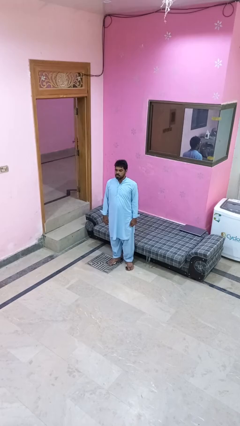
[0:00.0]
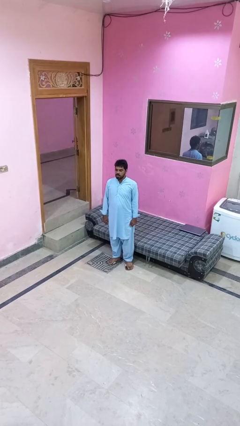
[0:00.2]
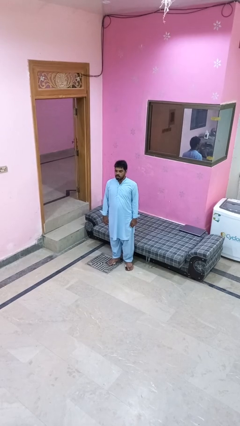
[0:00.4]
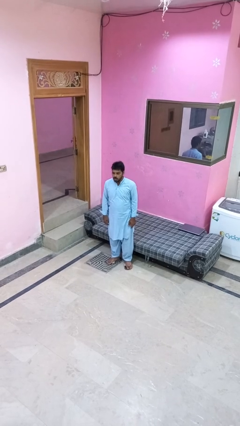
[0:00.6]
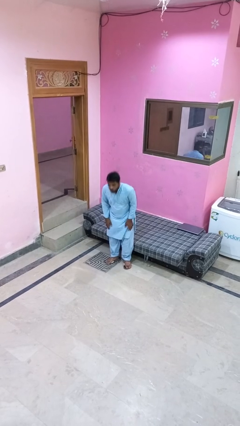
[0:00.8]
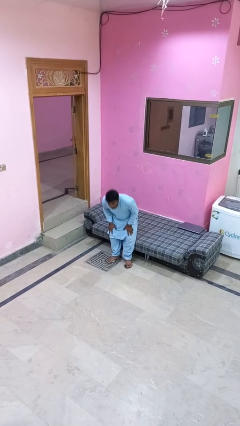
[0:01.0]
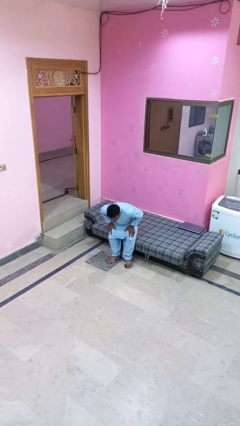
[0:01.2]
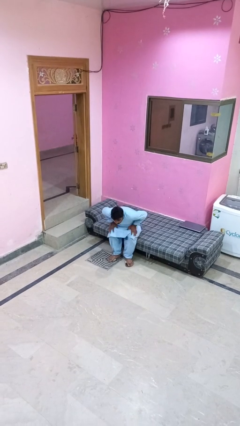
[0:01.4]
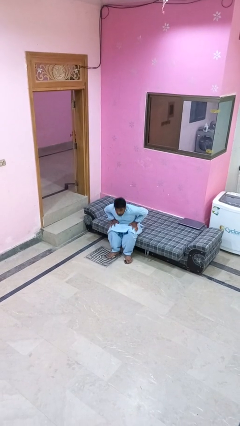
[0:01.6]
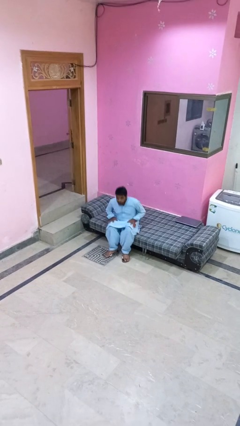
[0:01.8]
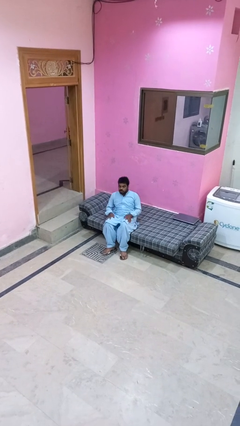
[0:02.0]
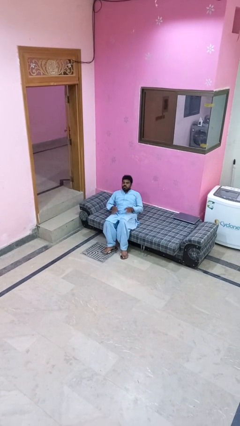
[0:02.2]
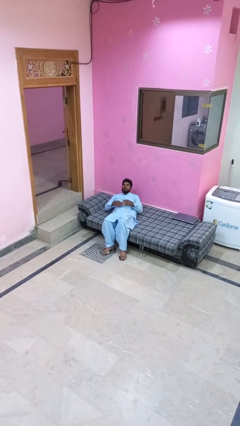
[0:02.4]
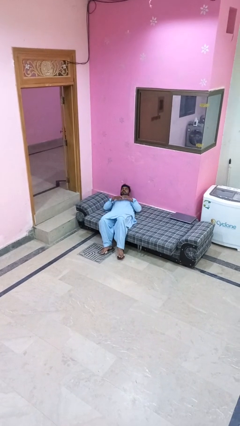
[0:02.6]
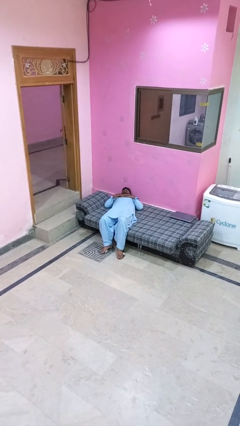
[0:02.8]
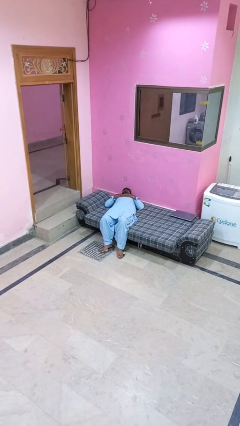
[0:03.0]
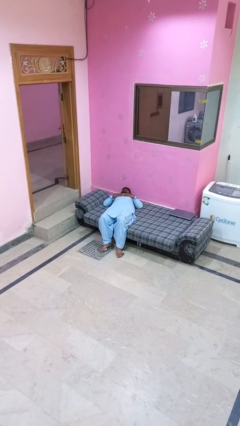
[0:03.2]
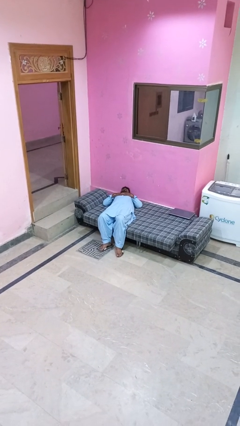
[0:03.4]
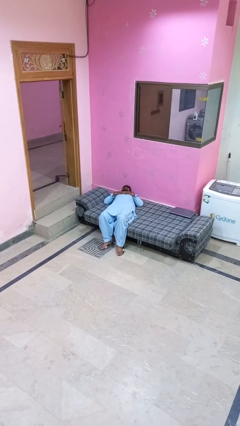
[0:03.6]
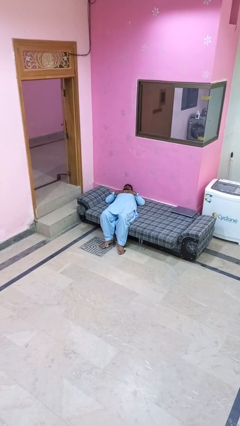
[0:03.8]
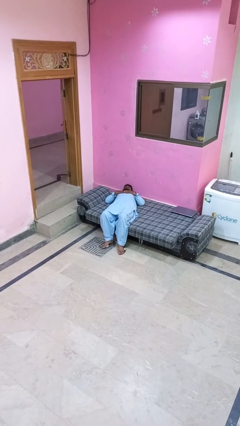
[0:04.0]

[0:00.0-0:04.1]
person lies down on bed

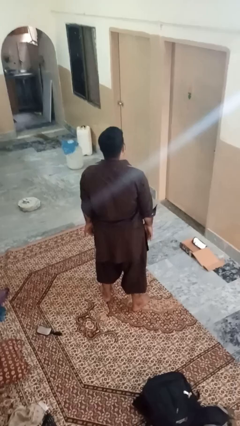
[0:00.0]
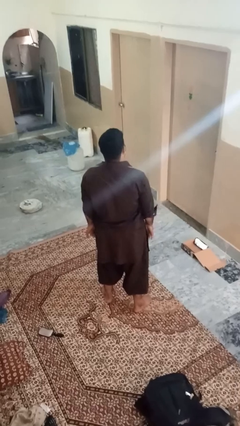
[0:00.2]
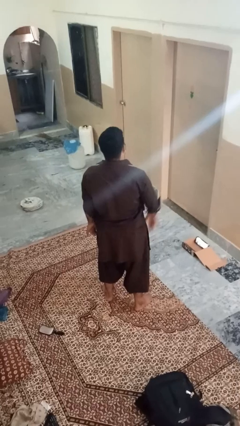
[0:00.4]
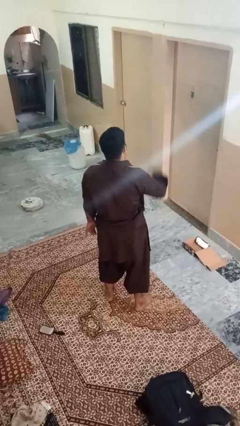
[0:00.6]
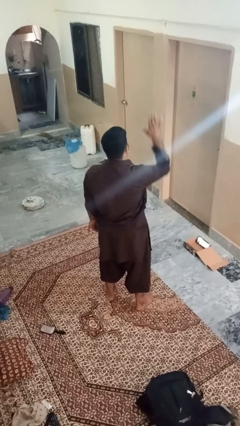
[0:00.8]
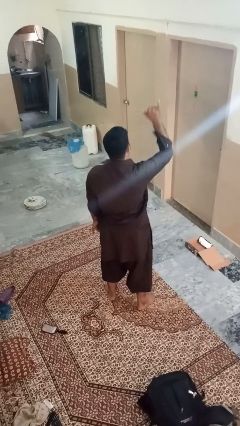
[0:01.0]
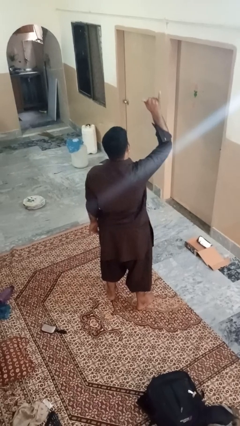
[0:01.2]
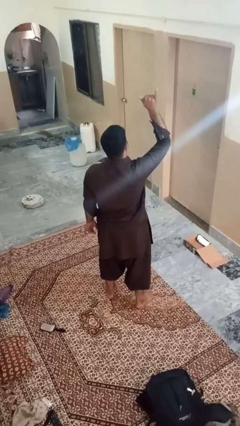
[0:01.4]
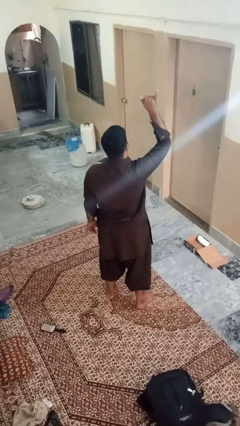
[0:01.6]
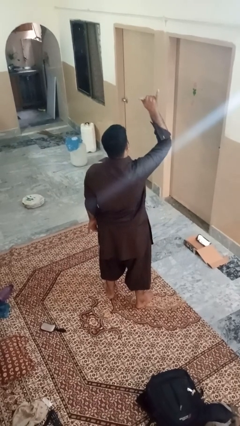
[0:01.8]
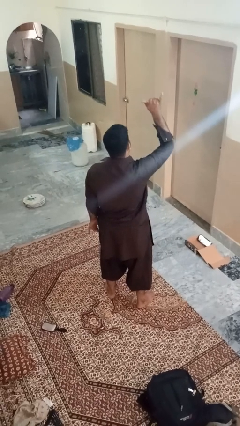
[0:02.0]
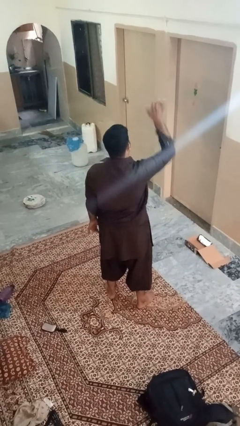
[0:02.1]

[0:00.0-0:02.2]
person gestures hang loose

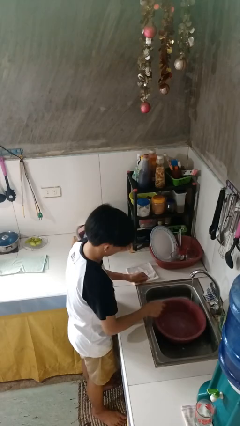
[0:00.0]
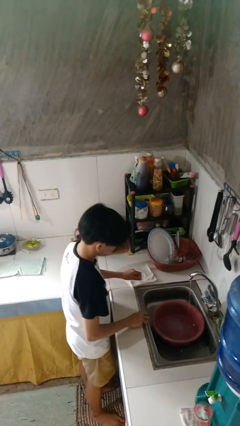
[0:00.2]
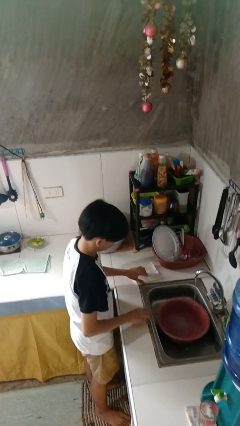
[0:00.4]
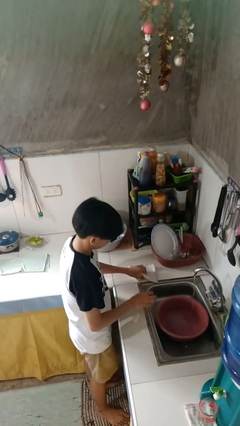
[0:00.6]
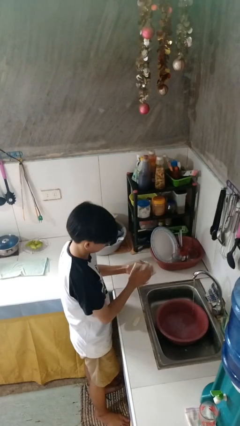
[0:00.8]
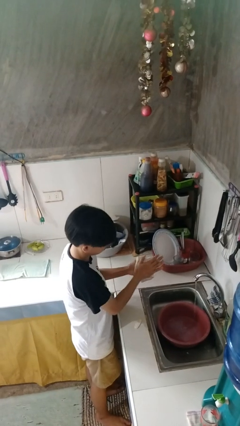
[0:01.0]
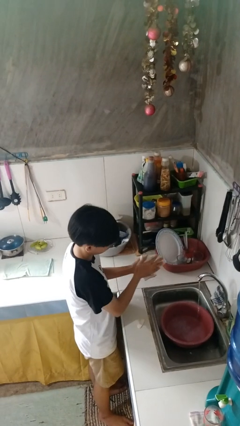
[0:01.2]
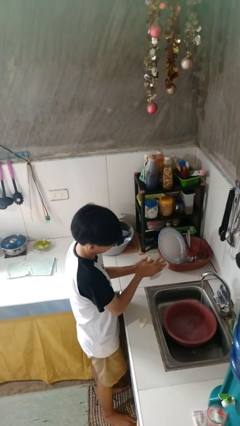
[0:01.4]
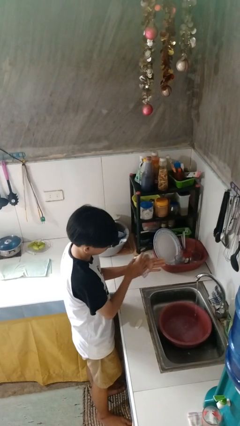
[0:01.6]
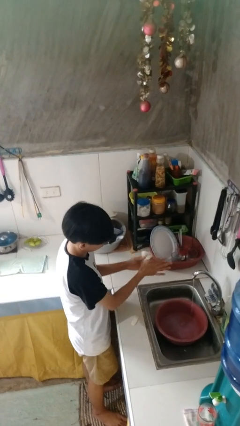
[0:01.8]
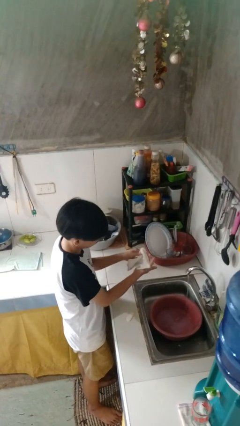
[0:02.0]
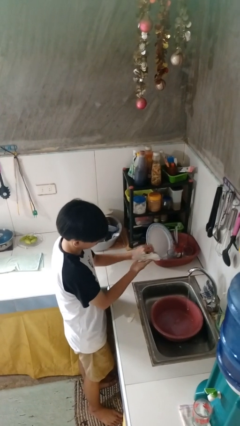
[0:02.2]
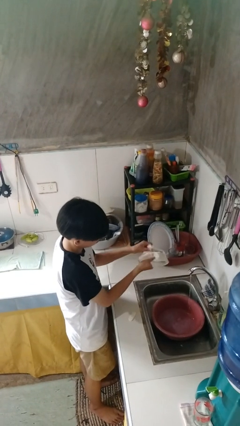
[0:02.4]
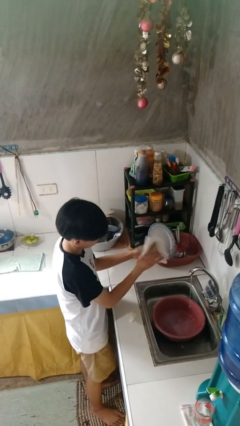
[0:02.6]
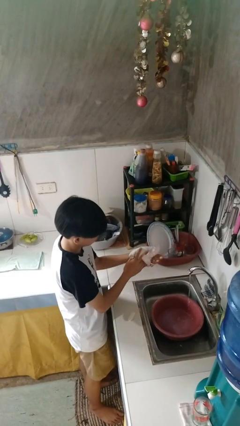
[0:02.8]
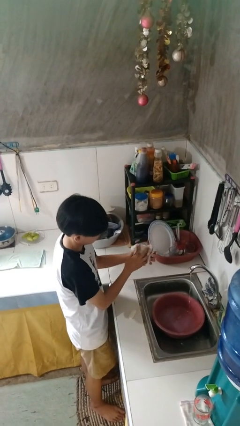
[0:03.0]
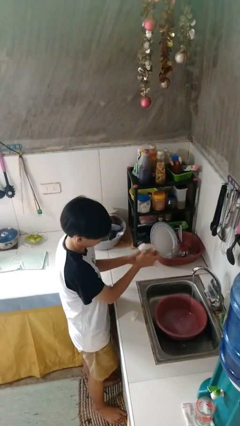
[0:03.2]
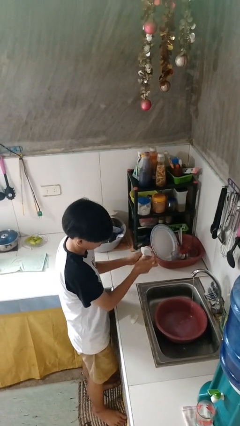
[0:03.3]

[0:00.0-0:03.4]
person dries hands with towel

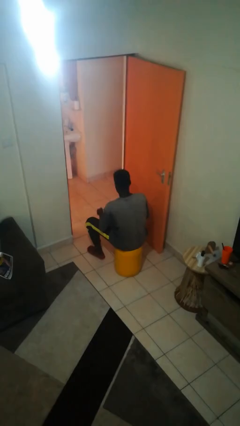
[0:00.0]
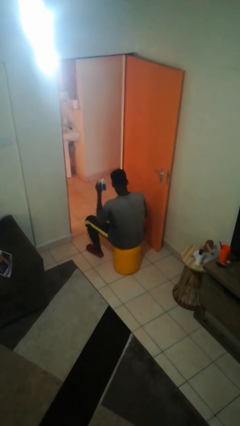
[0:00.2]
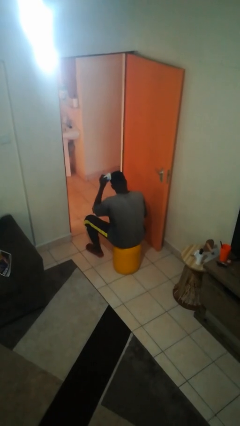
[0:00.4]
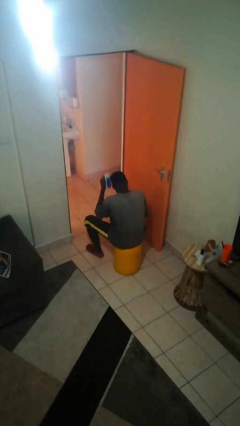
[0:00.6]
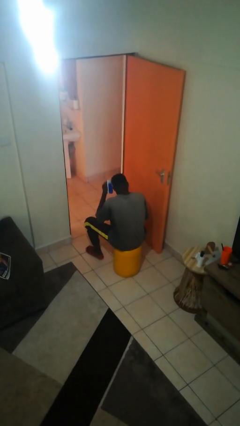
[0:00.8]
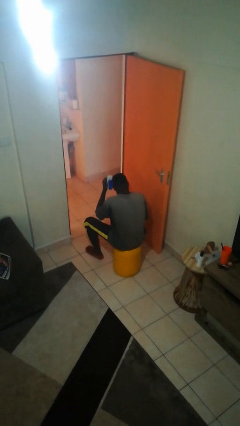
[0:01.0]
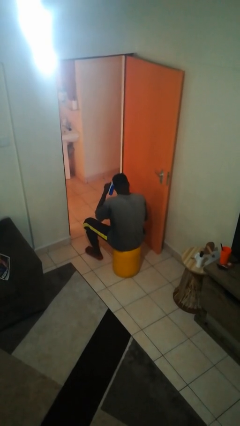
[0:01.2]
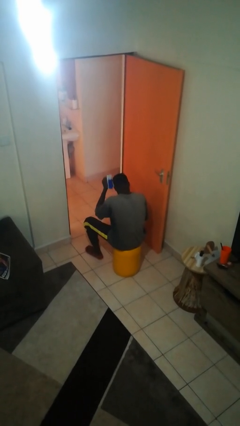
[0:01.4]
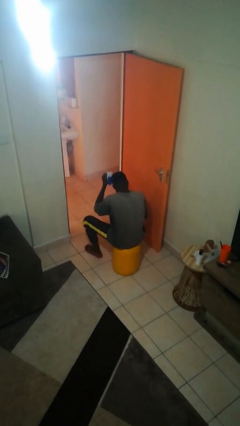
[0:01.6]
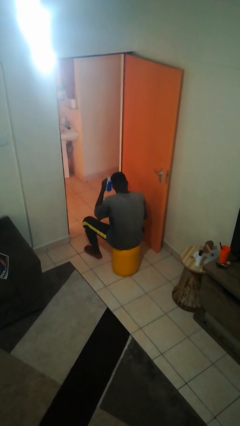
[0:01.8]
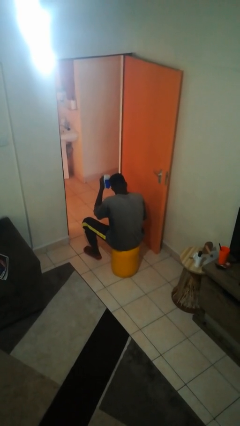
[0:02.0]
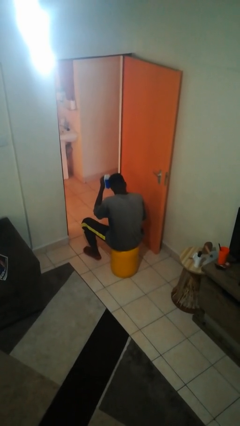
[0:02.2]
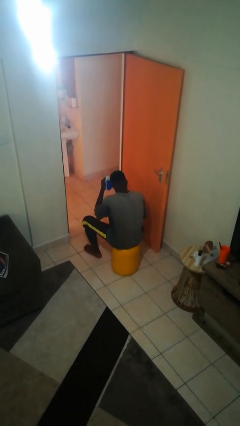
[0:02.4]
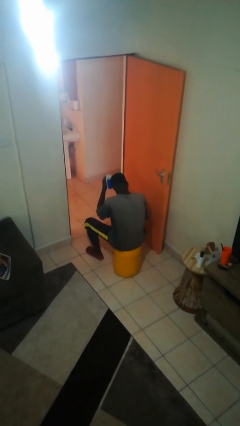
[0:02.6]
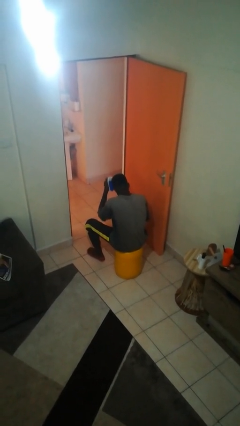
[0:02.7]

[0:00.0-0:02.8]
person brushes hair

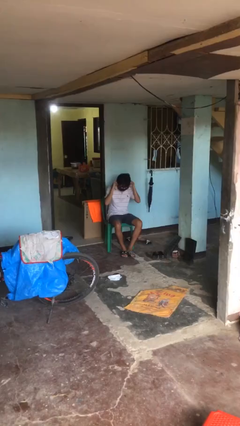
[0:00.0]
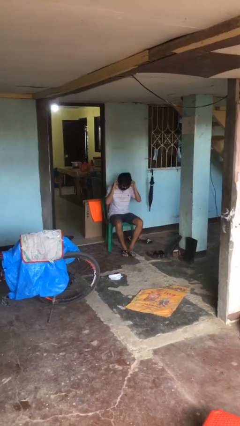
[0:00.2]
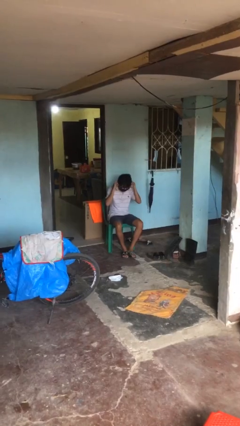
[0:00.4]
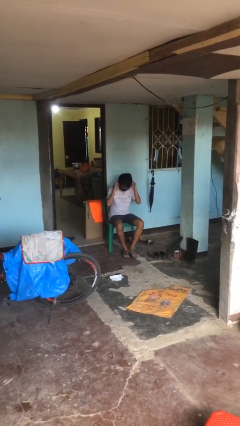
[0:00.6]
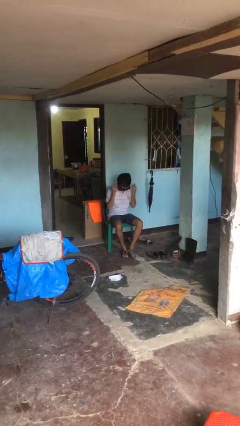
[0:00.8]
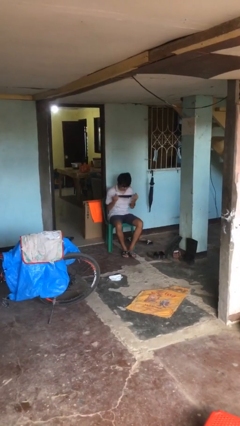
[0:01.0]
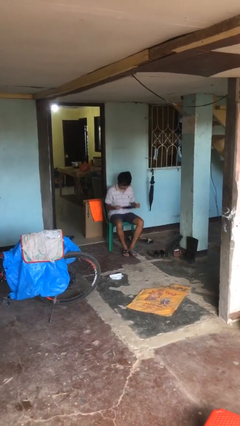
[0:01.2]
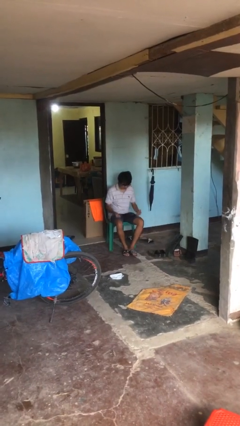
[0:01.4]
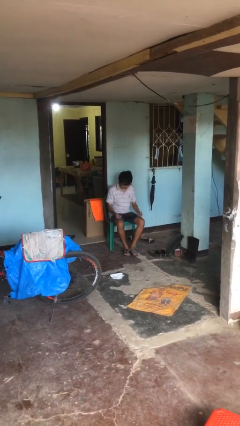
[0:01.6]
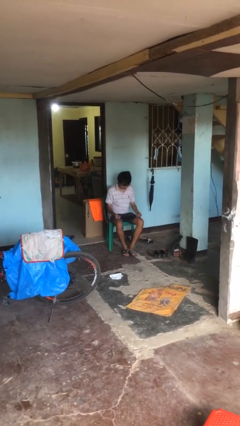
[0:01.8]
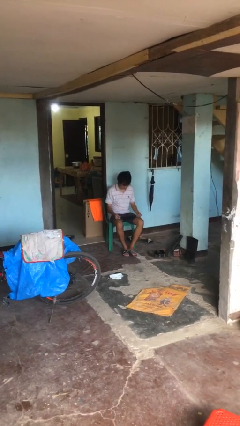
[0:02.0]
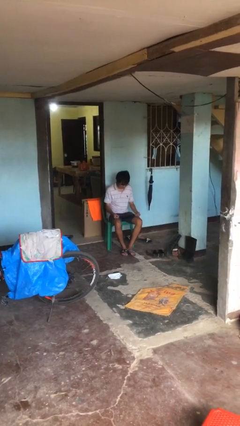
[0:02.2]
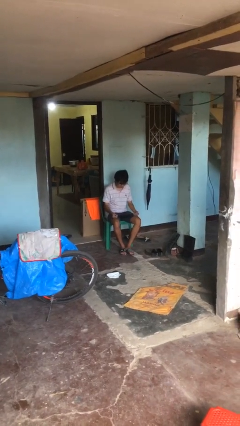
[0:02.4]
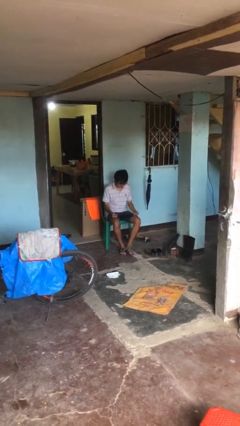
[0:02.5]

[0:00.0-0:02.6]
person takes off facemask

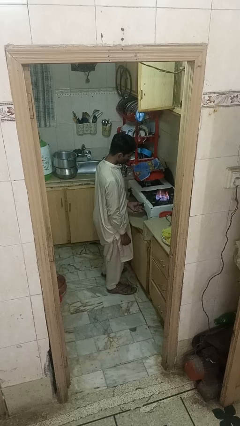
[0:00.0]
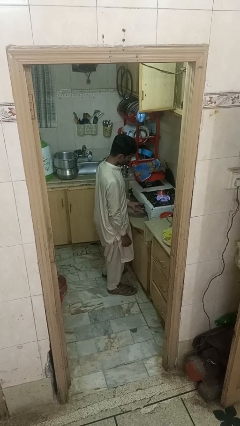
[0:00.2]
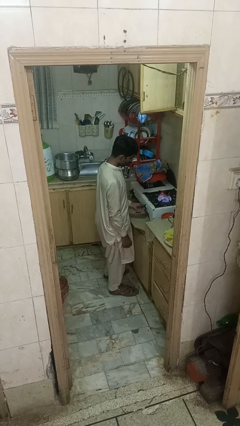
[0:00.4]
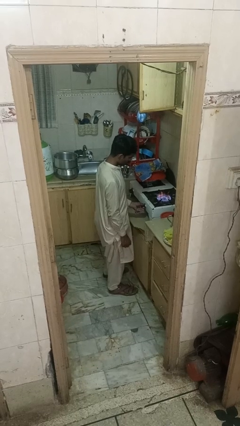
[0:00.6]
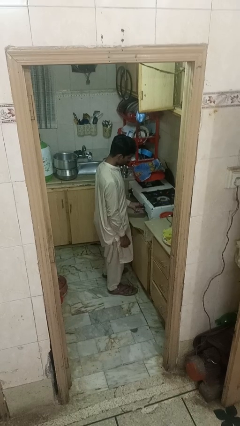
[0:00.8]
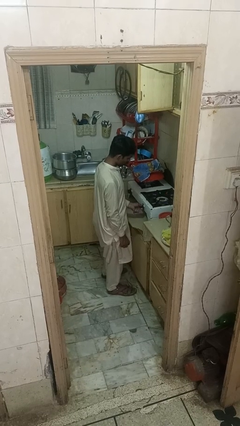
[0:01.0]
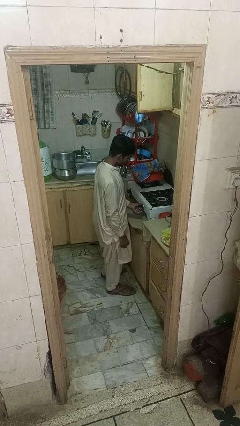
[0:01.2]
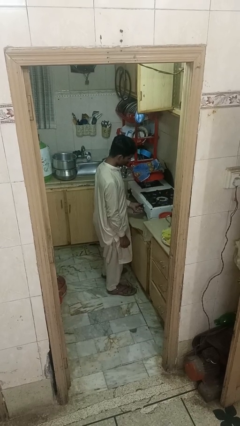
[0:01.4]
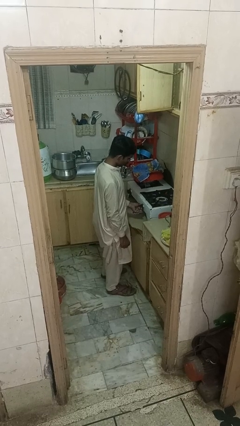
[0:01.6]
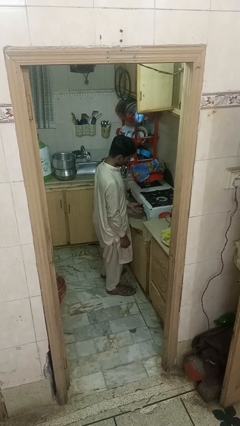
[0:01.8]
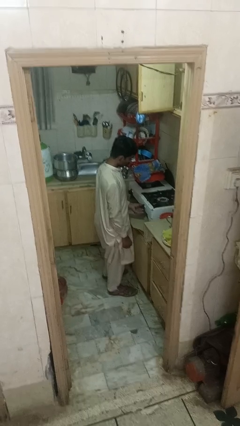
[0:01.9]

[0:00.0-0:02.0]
person turns off stovetop

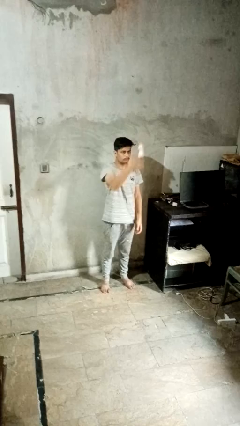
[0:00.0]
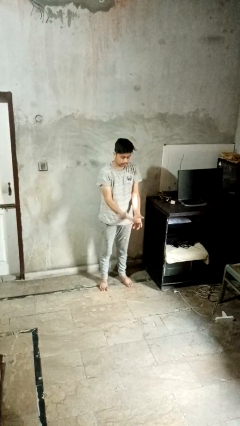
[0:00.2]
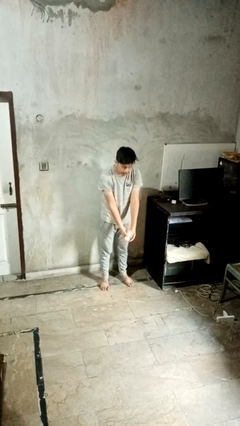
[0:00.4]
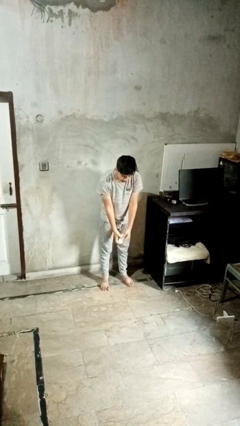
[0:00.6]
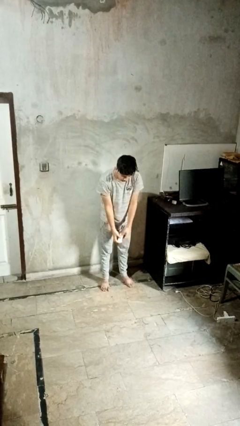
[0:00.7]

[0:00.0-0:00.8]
person catches dropped object
